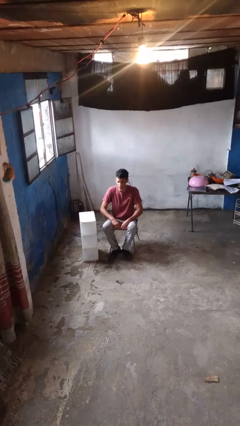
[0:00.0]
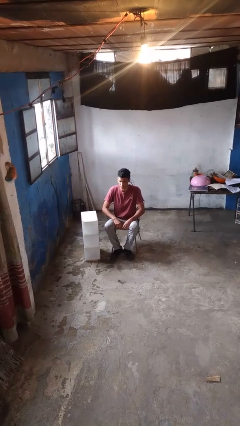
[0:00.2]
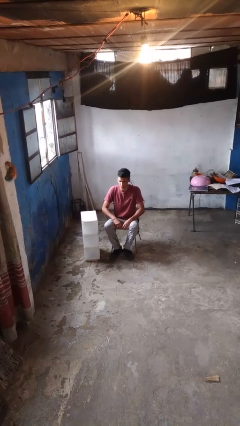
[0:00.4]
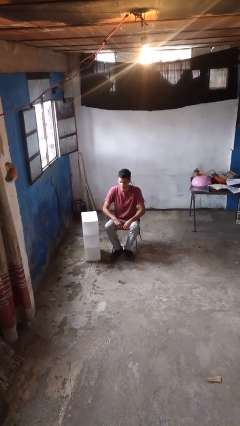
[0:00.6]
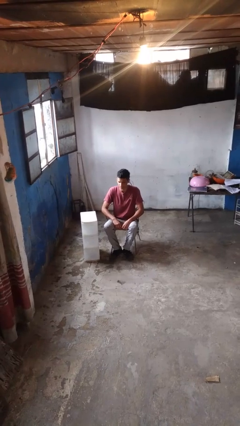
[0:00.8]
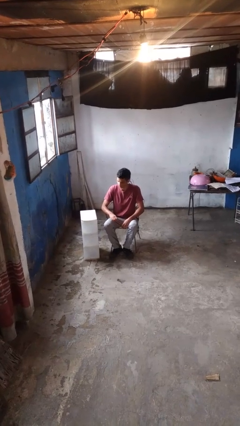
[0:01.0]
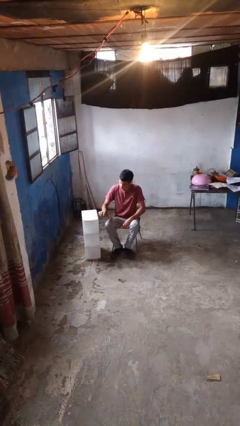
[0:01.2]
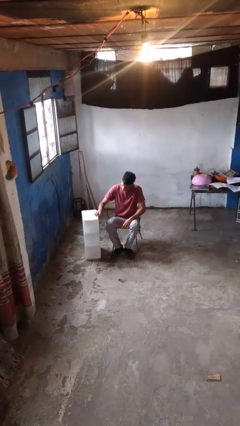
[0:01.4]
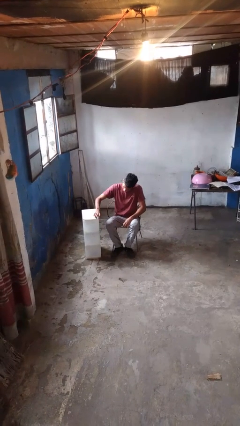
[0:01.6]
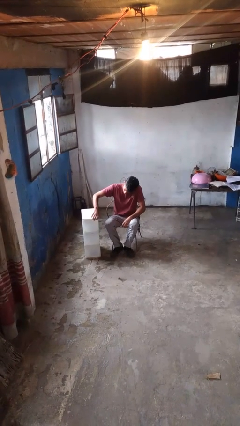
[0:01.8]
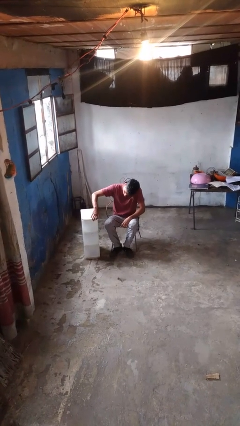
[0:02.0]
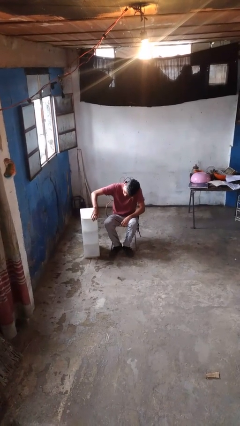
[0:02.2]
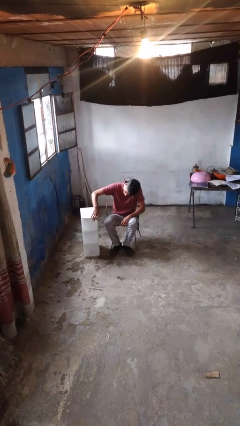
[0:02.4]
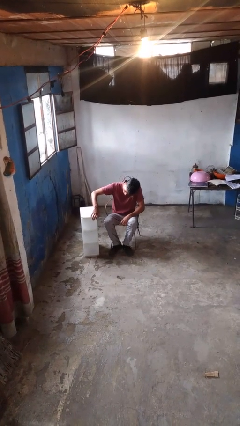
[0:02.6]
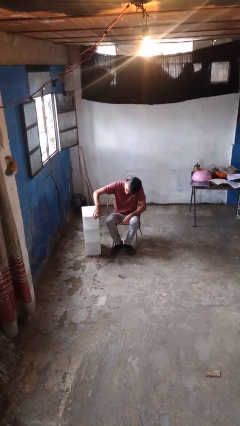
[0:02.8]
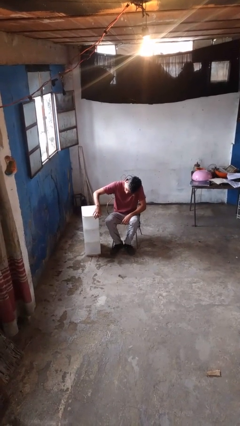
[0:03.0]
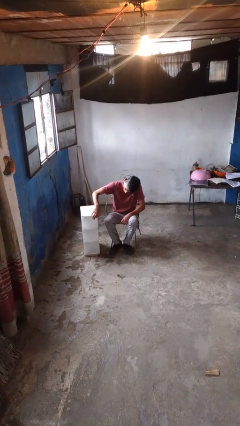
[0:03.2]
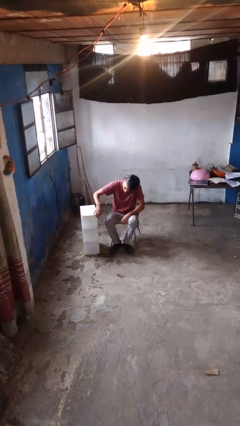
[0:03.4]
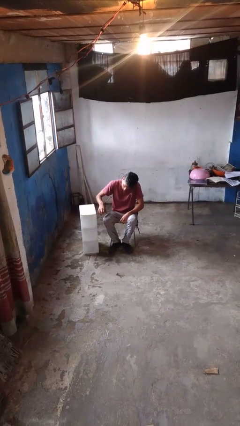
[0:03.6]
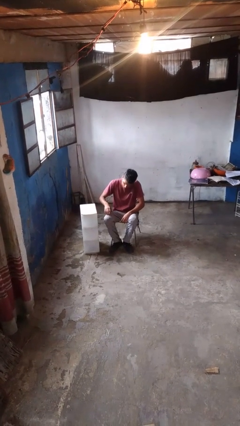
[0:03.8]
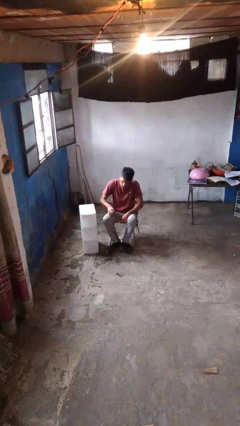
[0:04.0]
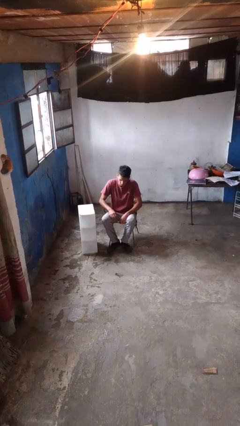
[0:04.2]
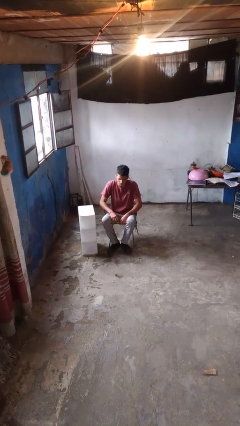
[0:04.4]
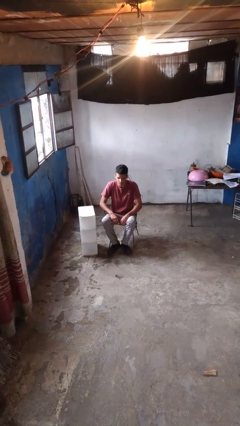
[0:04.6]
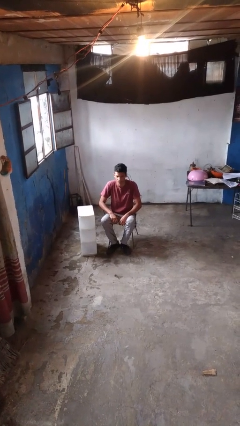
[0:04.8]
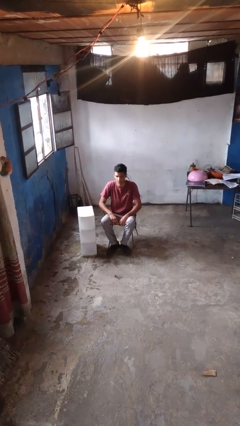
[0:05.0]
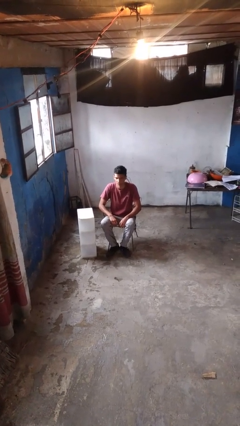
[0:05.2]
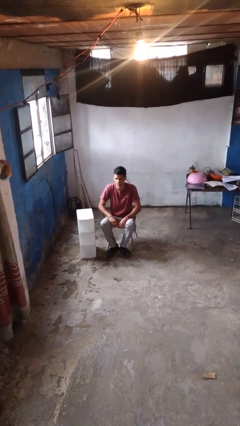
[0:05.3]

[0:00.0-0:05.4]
person taps object with finger

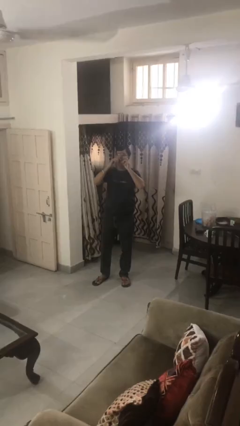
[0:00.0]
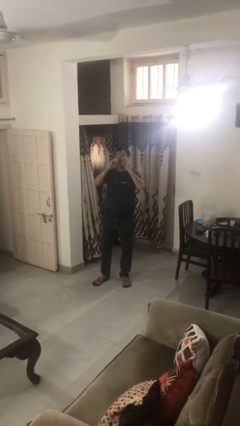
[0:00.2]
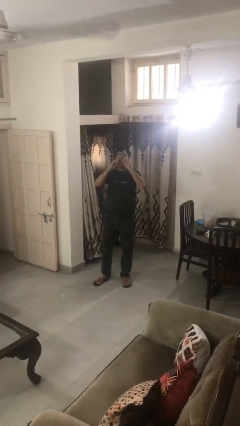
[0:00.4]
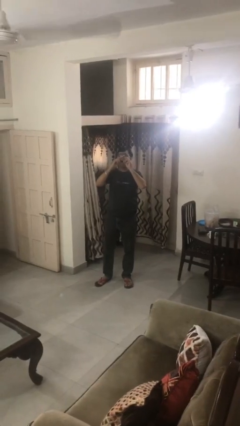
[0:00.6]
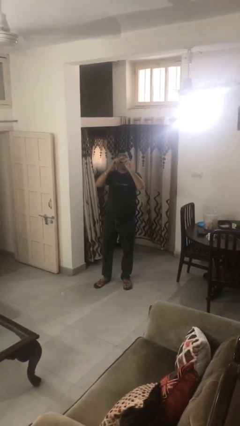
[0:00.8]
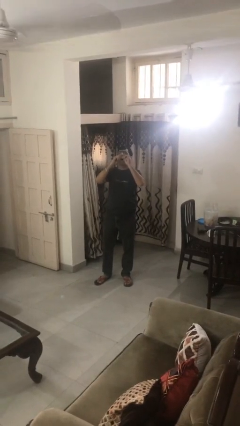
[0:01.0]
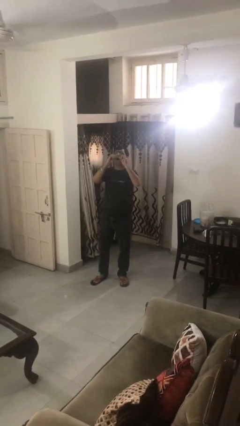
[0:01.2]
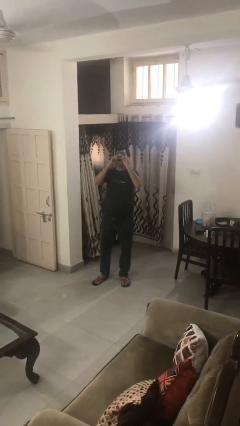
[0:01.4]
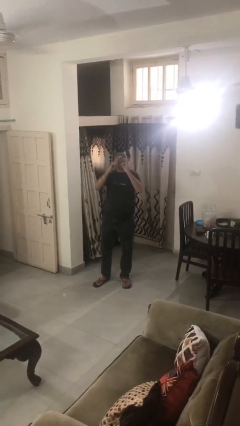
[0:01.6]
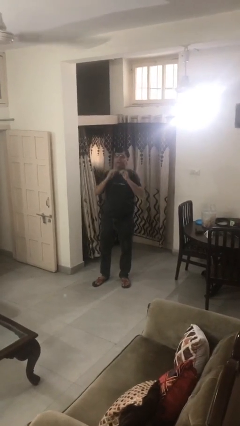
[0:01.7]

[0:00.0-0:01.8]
person flosses

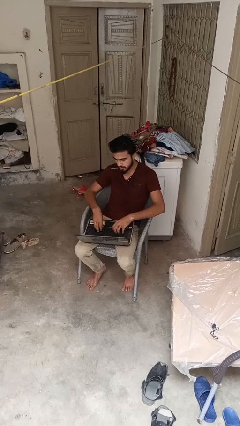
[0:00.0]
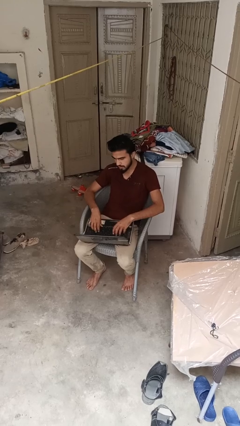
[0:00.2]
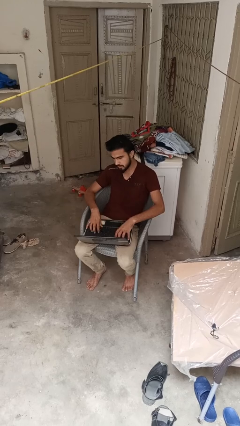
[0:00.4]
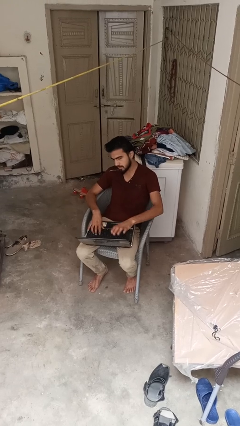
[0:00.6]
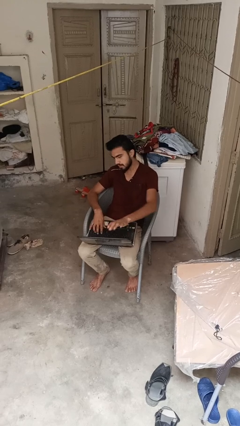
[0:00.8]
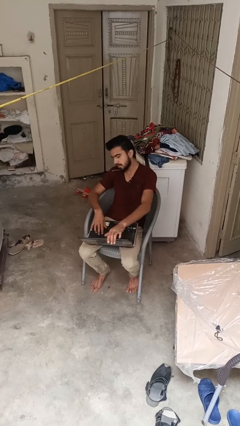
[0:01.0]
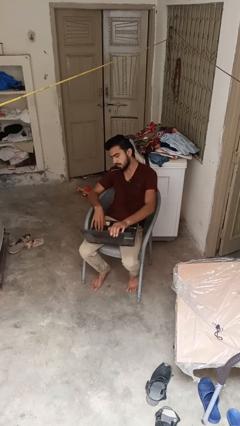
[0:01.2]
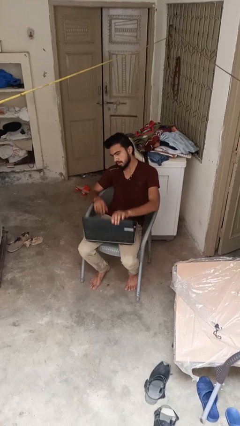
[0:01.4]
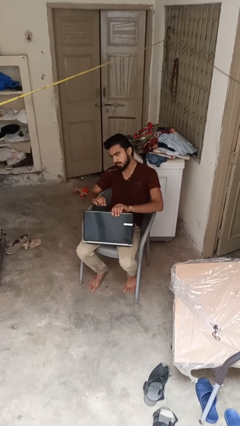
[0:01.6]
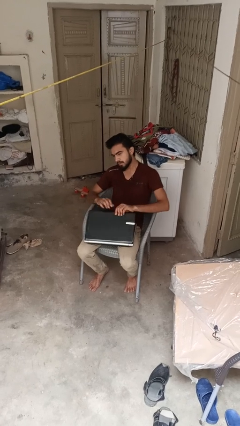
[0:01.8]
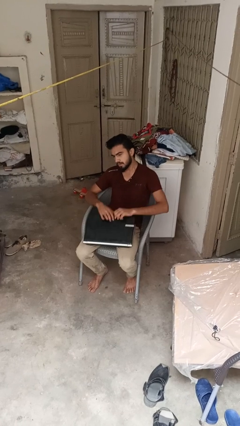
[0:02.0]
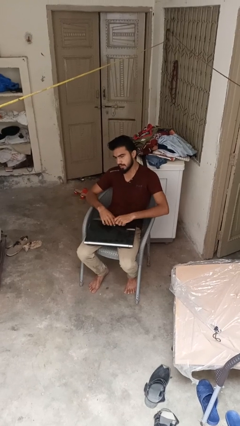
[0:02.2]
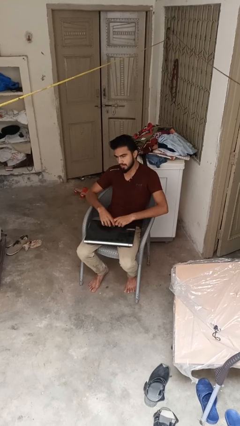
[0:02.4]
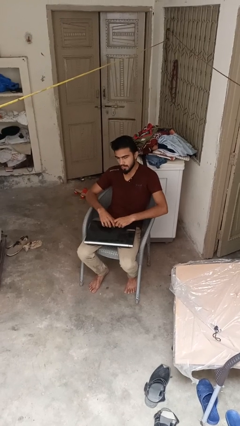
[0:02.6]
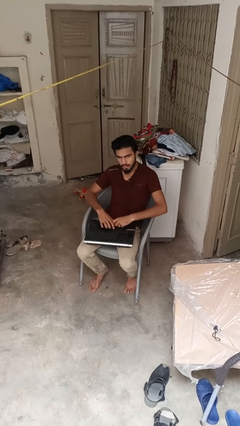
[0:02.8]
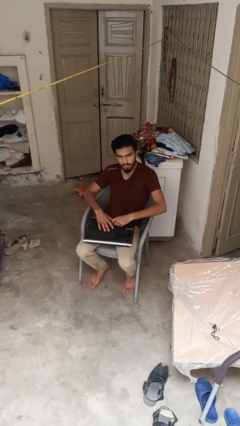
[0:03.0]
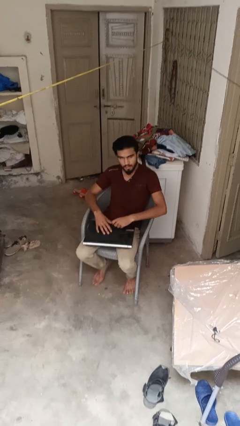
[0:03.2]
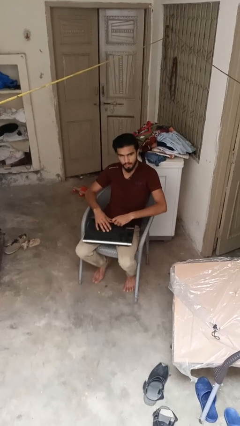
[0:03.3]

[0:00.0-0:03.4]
person closes laptop

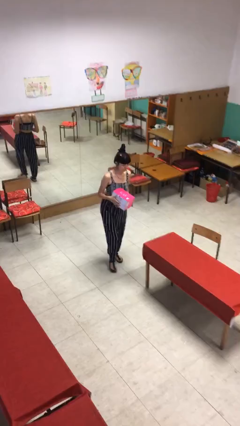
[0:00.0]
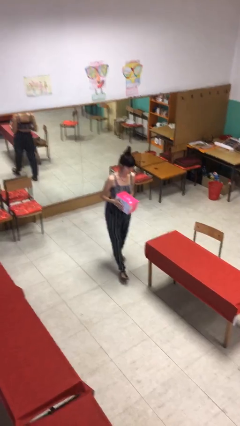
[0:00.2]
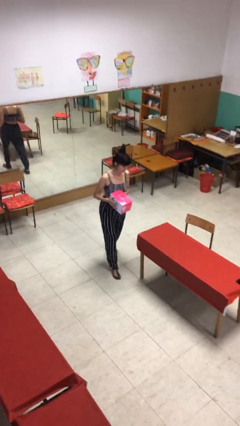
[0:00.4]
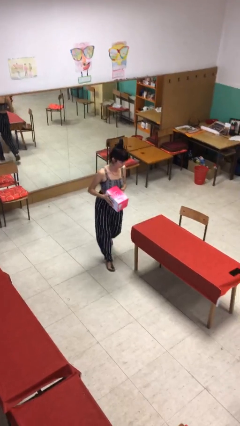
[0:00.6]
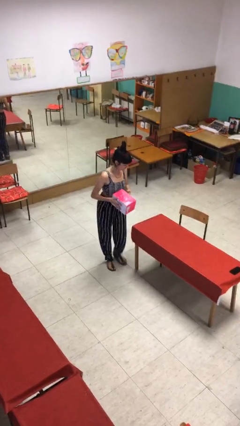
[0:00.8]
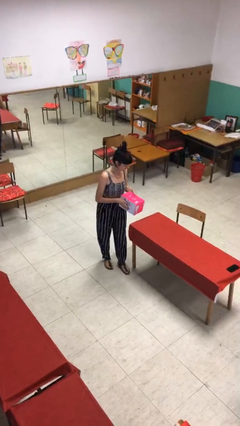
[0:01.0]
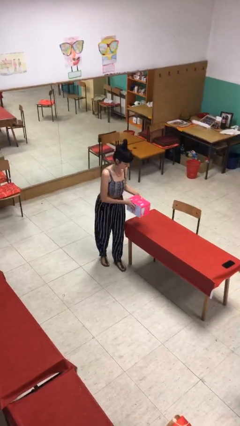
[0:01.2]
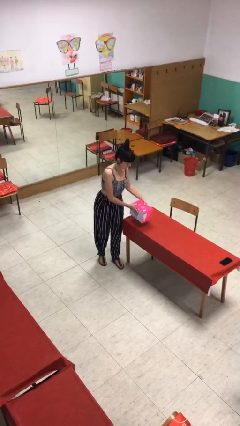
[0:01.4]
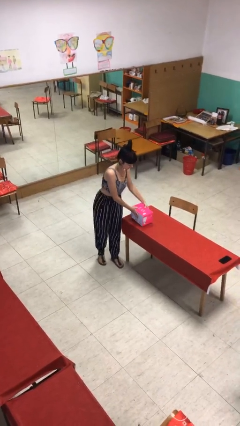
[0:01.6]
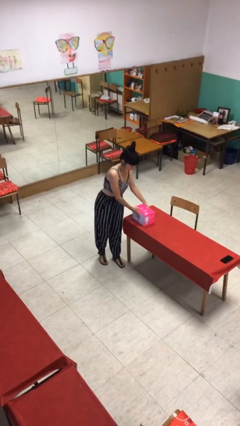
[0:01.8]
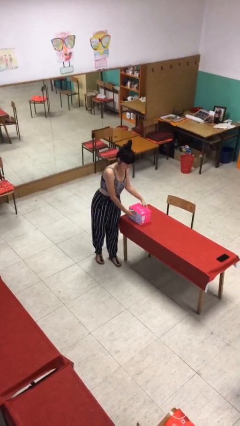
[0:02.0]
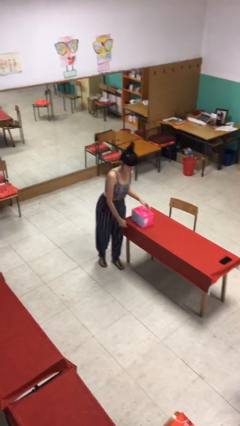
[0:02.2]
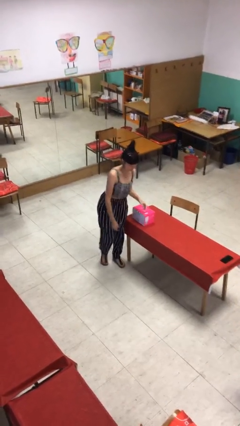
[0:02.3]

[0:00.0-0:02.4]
person puts down object on table

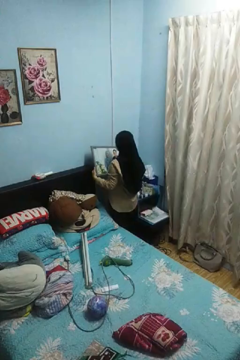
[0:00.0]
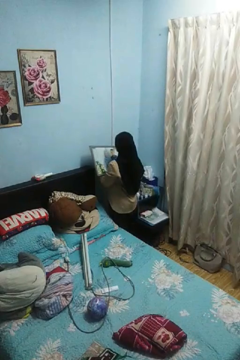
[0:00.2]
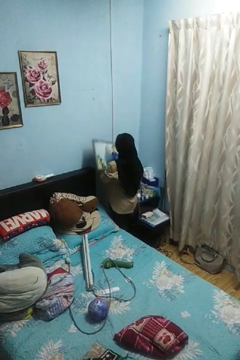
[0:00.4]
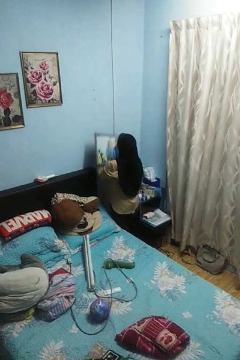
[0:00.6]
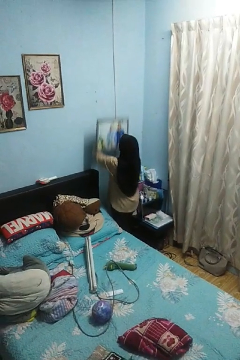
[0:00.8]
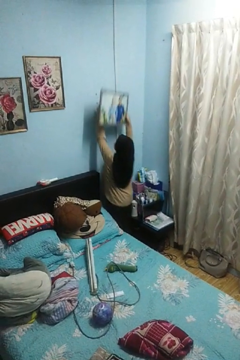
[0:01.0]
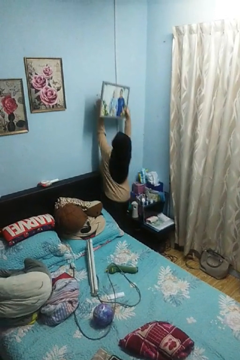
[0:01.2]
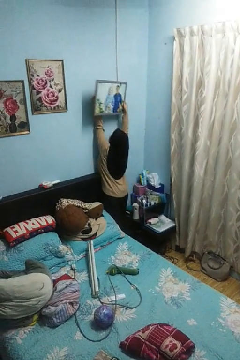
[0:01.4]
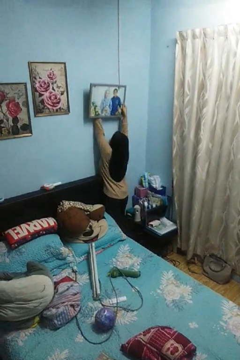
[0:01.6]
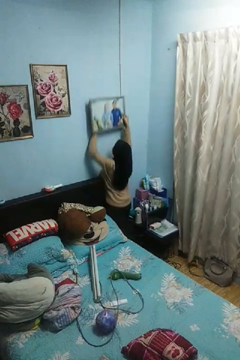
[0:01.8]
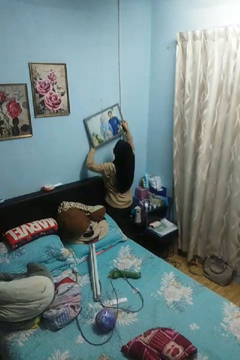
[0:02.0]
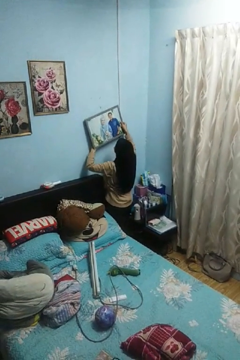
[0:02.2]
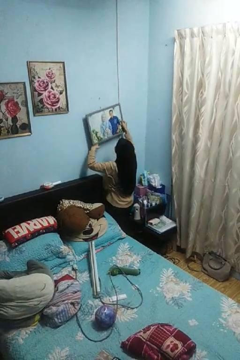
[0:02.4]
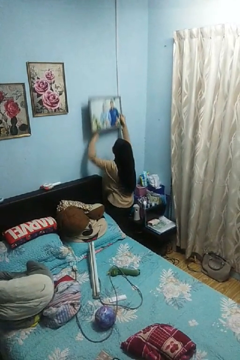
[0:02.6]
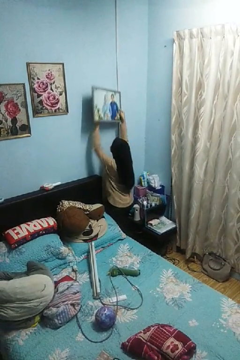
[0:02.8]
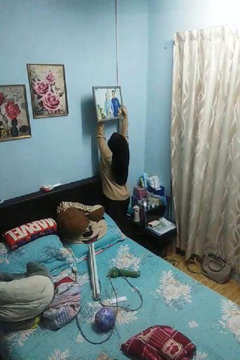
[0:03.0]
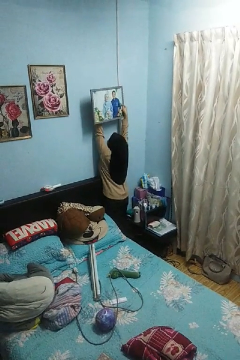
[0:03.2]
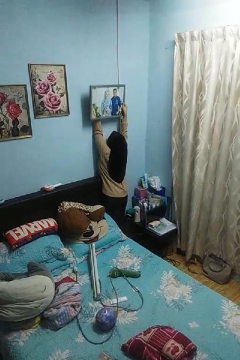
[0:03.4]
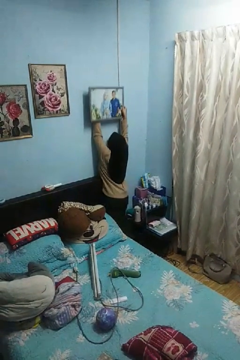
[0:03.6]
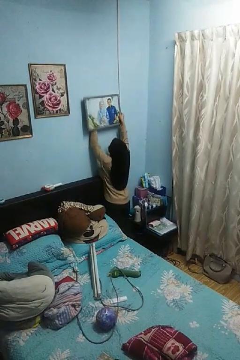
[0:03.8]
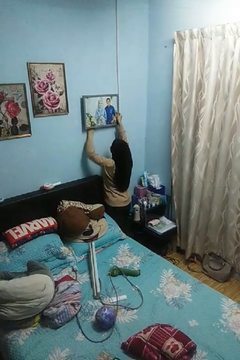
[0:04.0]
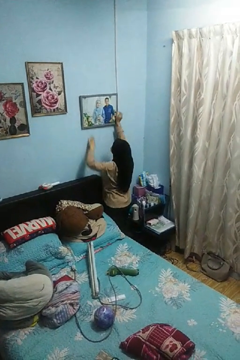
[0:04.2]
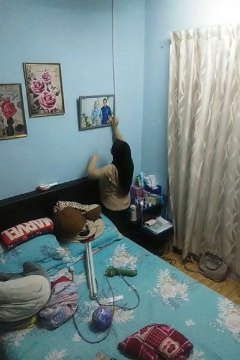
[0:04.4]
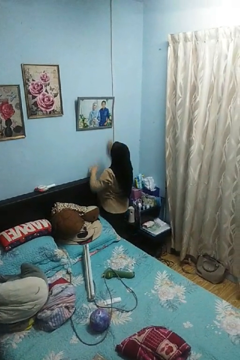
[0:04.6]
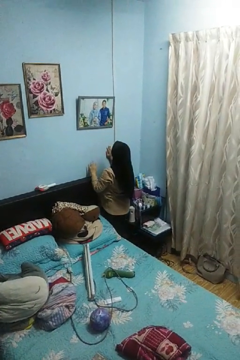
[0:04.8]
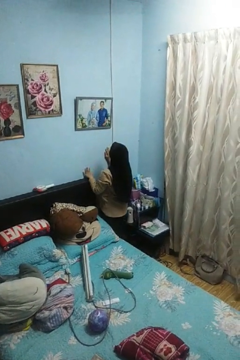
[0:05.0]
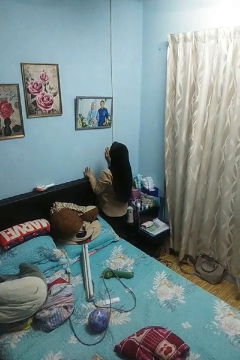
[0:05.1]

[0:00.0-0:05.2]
person puts up picture frame

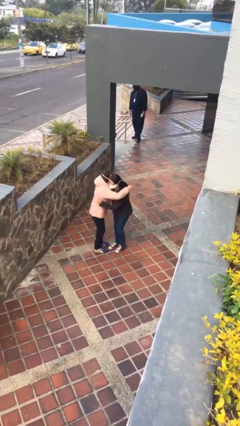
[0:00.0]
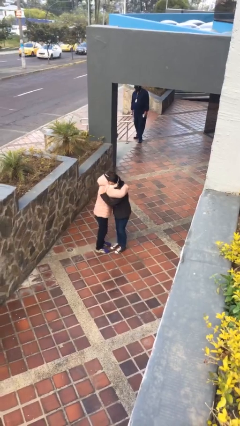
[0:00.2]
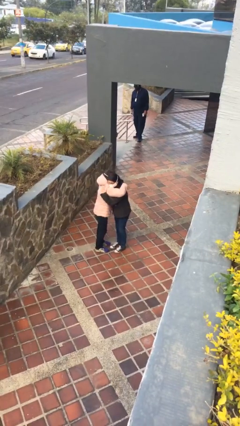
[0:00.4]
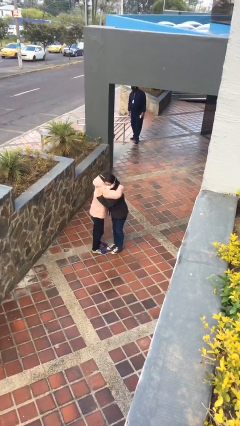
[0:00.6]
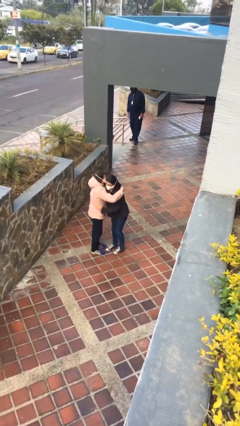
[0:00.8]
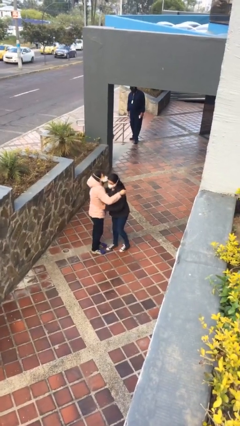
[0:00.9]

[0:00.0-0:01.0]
person embraces person
